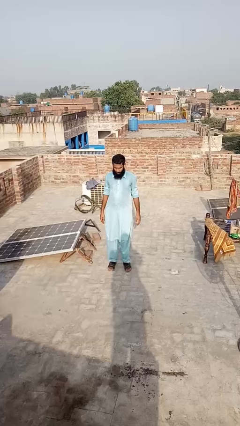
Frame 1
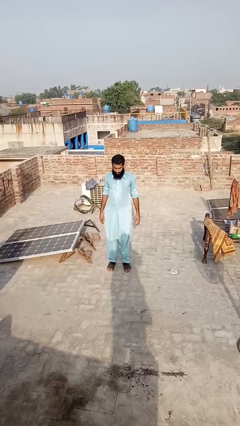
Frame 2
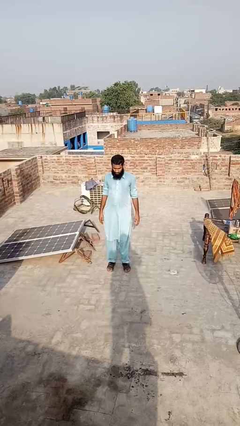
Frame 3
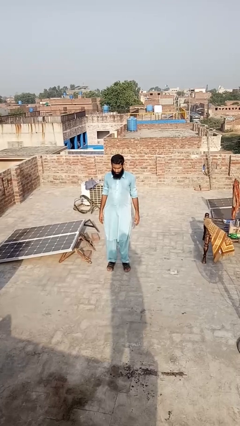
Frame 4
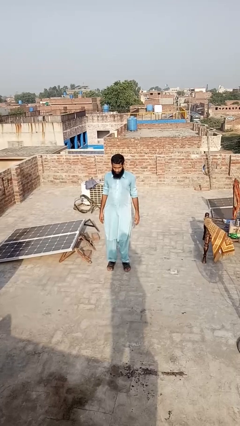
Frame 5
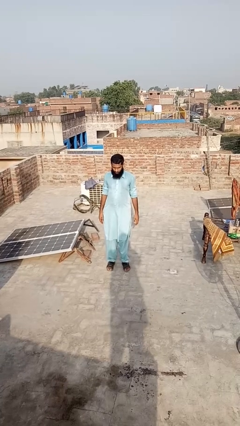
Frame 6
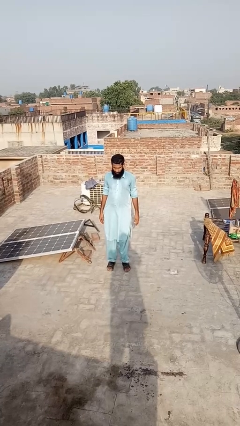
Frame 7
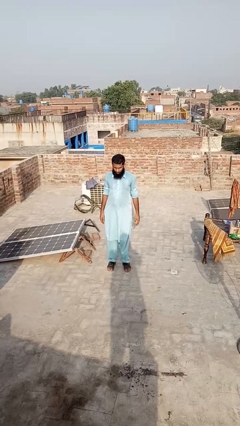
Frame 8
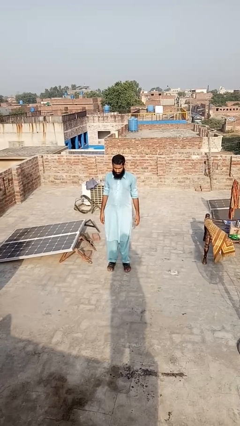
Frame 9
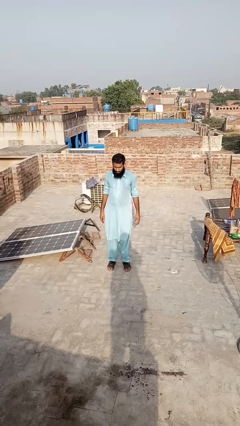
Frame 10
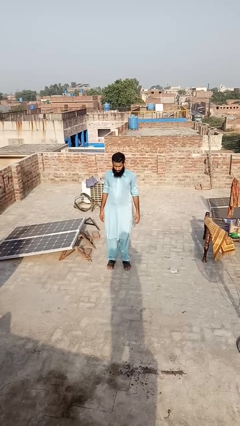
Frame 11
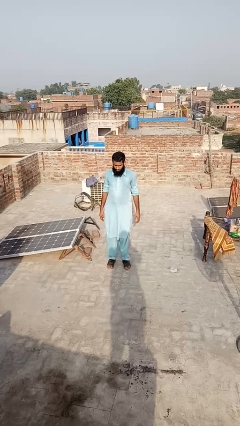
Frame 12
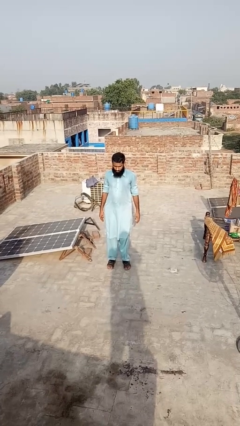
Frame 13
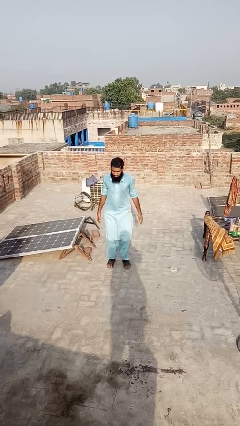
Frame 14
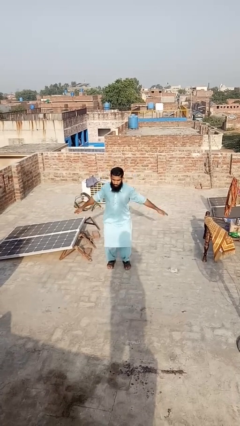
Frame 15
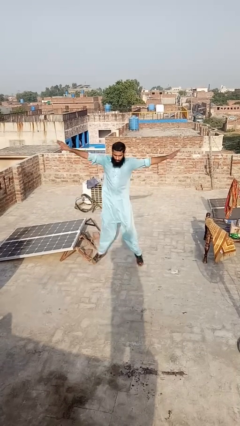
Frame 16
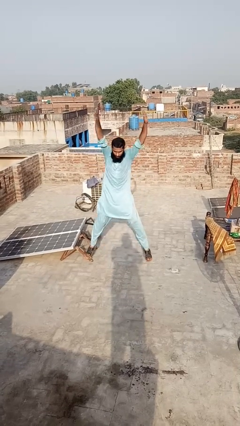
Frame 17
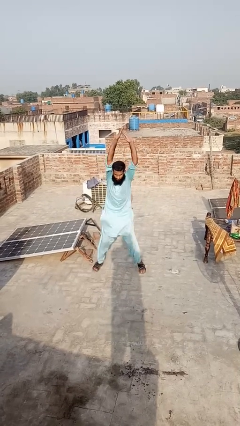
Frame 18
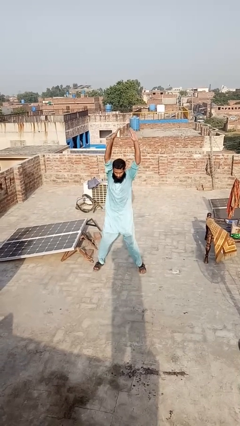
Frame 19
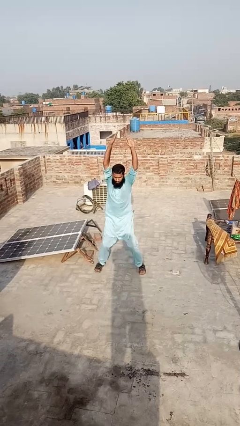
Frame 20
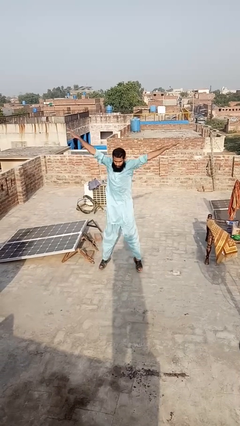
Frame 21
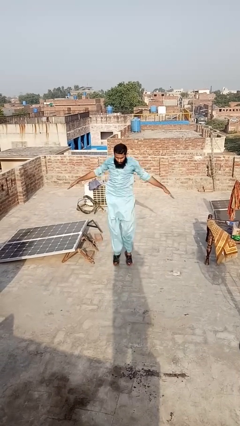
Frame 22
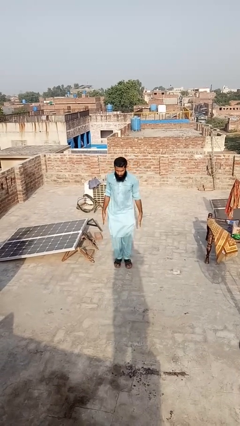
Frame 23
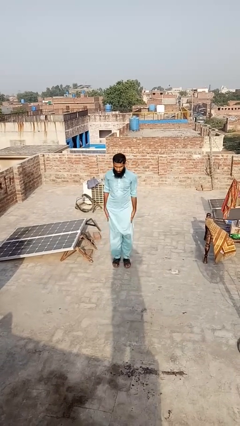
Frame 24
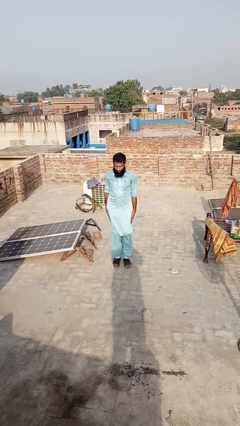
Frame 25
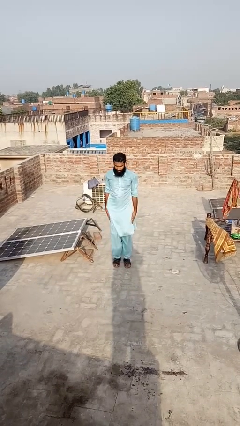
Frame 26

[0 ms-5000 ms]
person exercises with jumping jacks

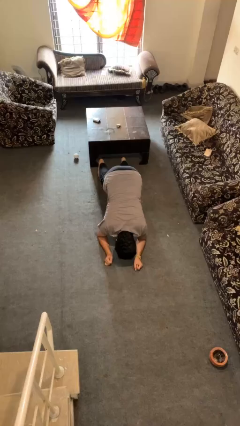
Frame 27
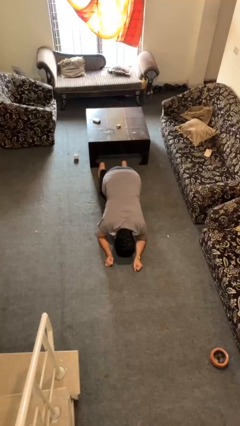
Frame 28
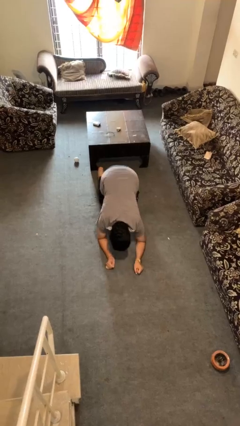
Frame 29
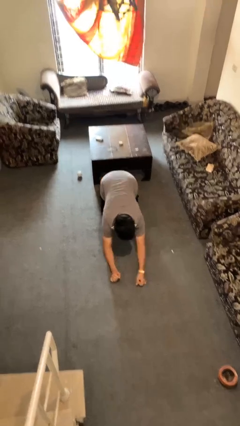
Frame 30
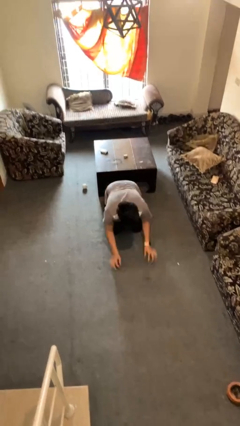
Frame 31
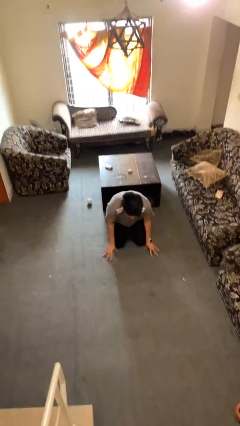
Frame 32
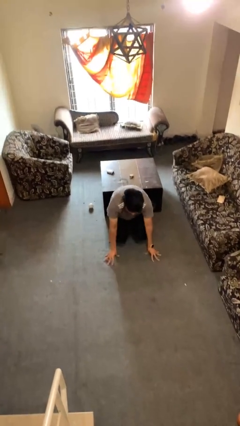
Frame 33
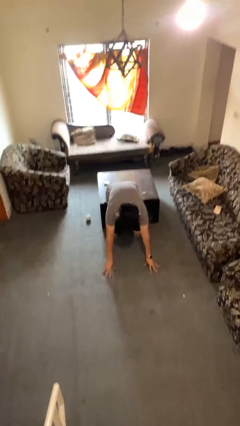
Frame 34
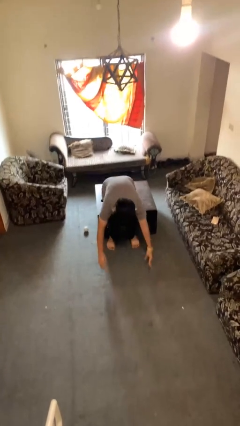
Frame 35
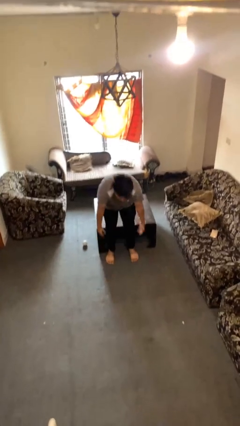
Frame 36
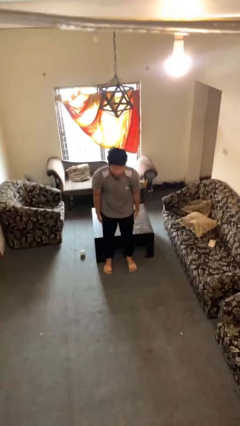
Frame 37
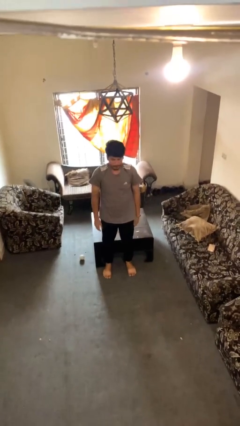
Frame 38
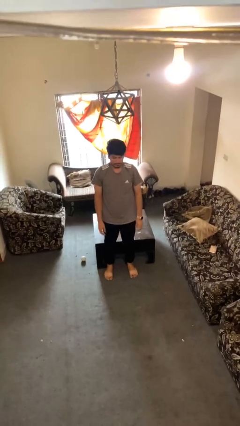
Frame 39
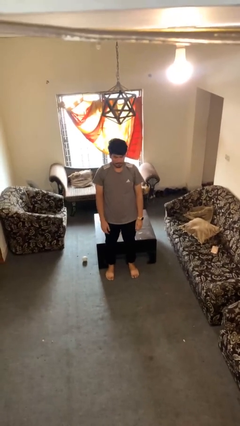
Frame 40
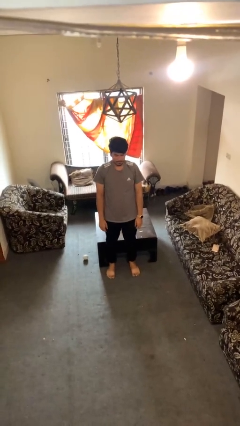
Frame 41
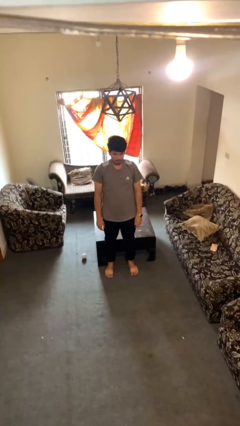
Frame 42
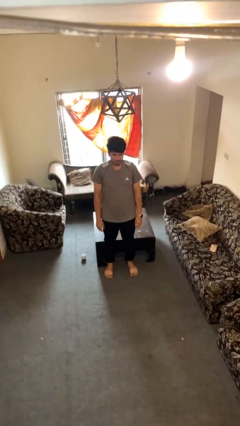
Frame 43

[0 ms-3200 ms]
person stands up from floor

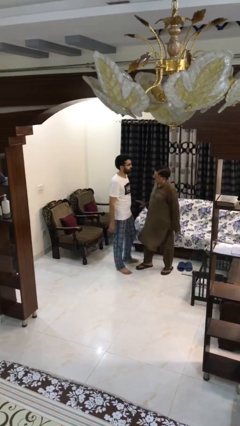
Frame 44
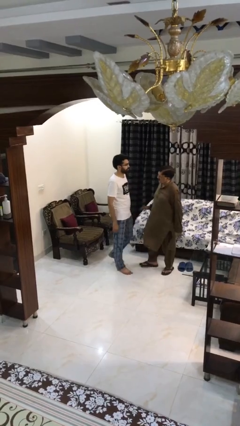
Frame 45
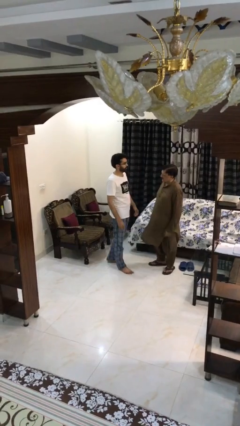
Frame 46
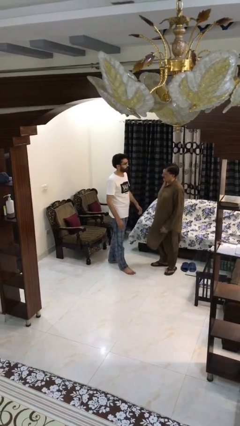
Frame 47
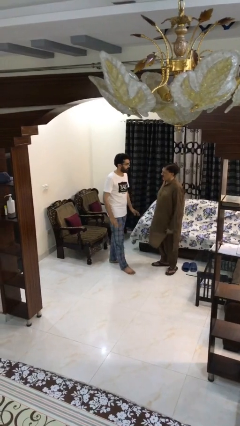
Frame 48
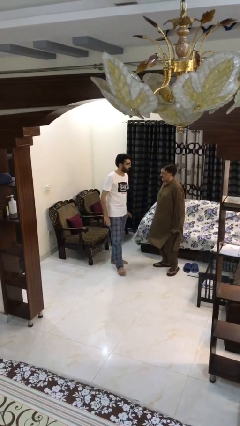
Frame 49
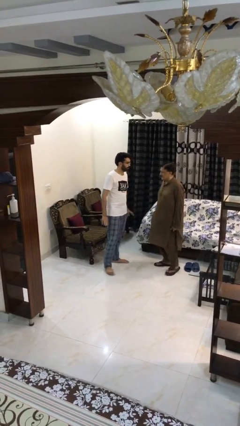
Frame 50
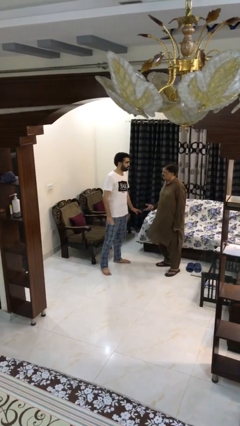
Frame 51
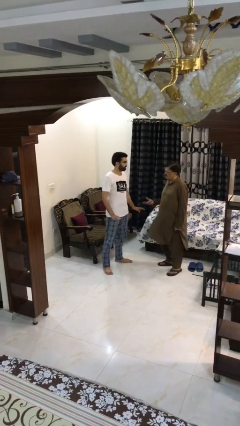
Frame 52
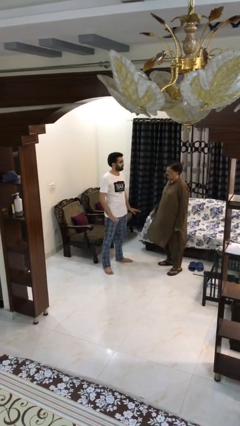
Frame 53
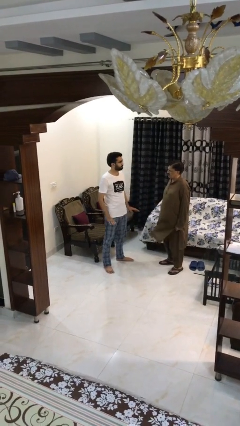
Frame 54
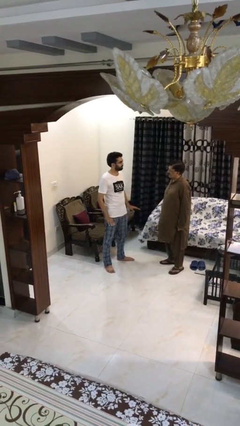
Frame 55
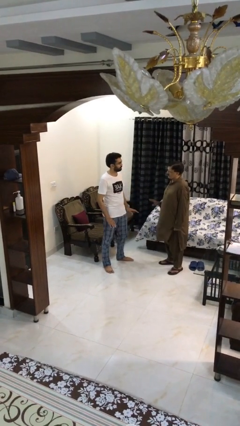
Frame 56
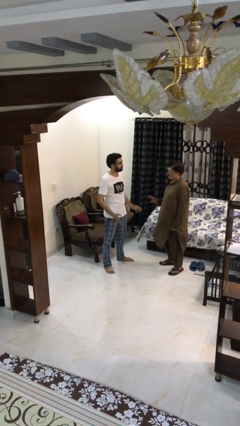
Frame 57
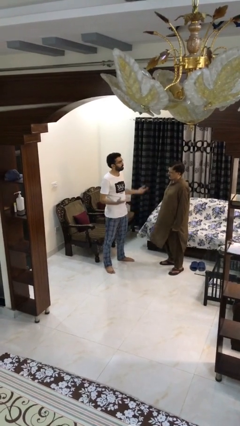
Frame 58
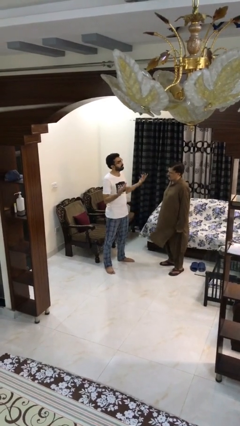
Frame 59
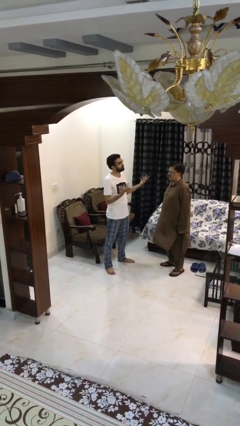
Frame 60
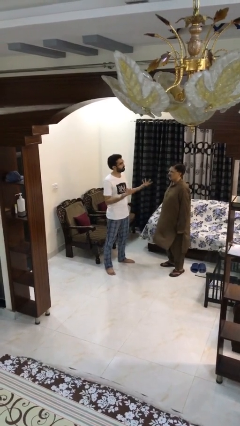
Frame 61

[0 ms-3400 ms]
person talks to person

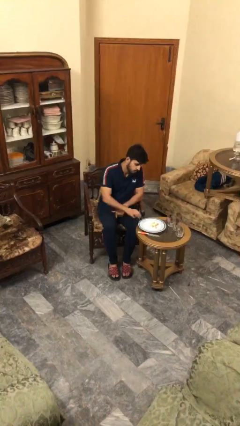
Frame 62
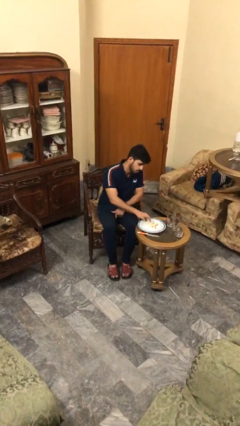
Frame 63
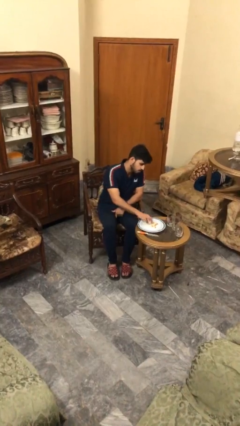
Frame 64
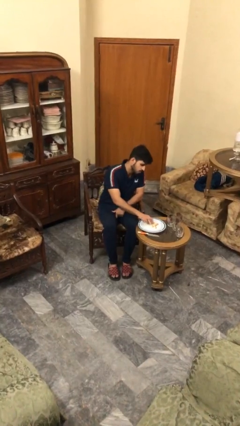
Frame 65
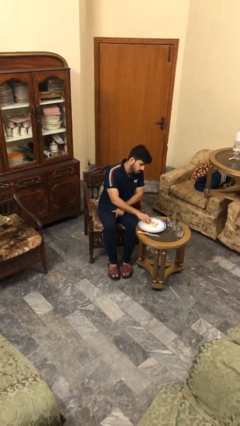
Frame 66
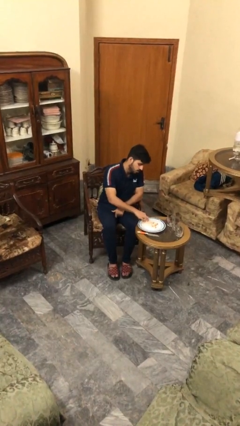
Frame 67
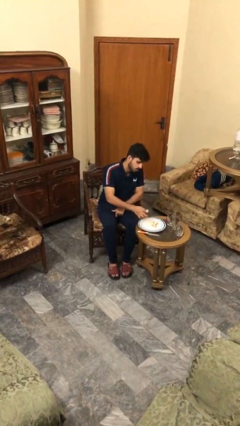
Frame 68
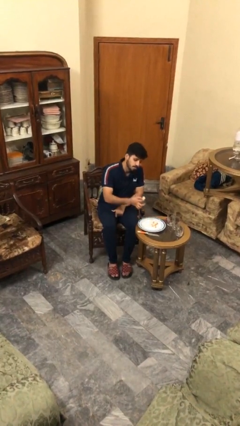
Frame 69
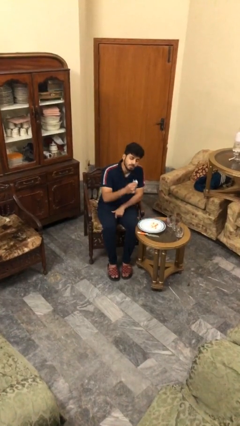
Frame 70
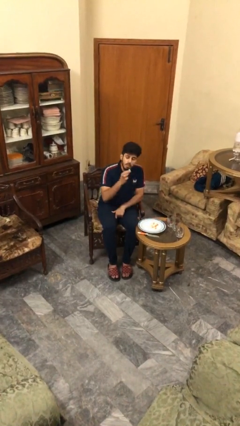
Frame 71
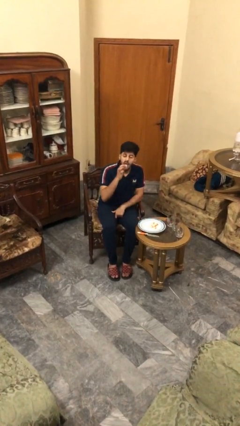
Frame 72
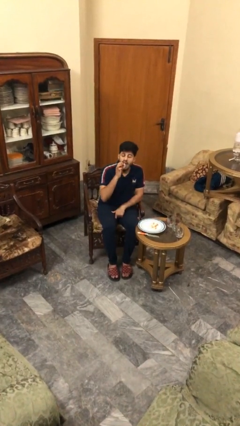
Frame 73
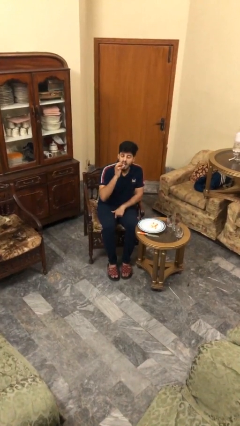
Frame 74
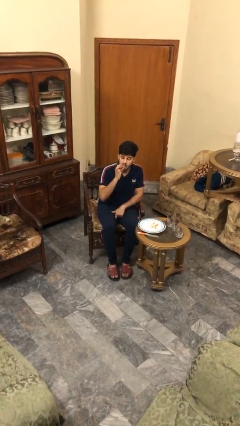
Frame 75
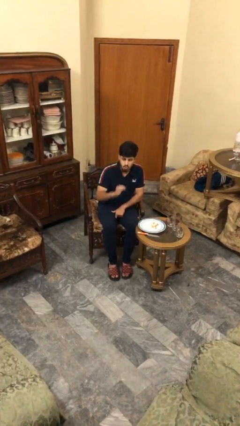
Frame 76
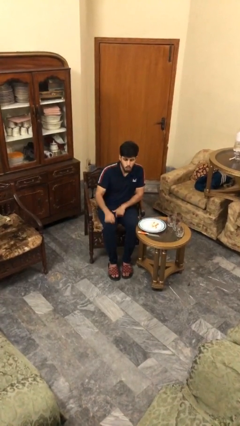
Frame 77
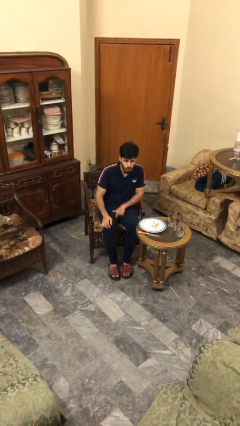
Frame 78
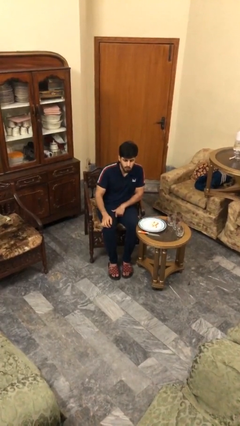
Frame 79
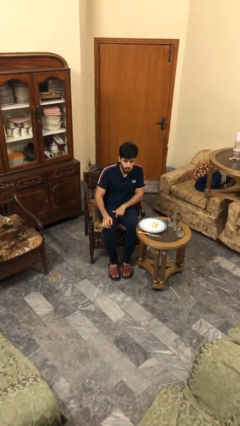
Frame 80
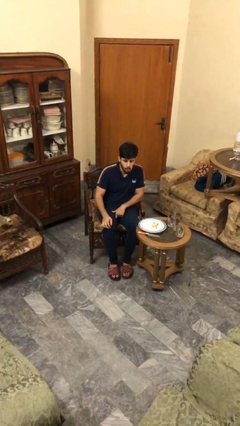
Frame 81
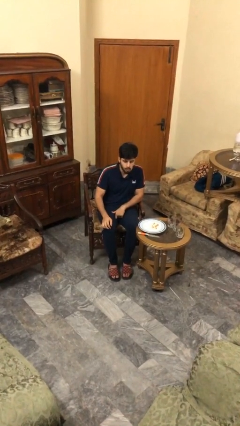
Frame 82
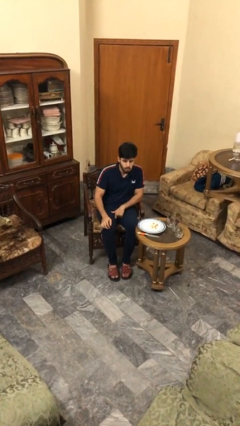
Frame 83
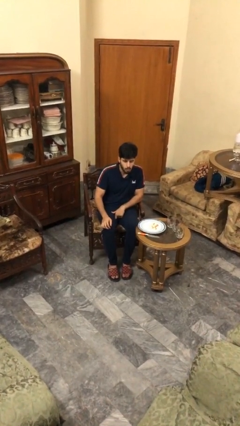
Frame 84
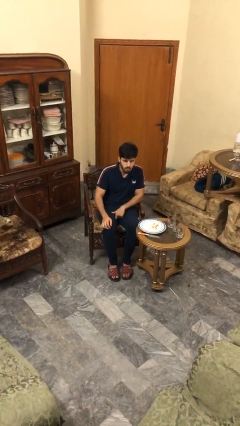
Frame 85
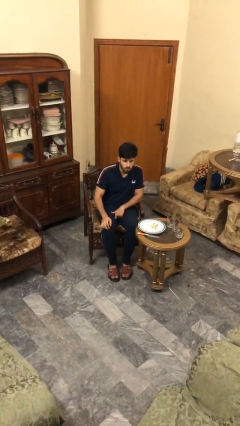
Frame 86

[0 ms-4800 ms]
person eats with hands

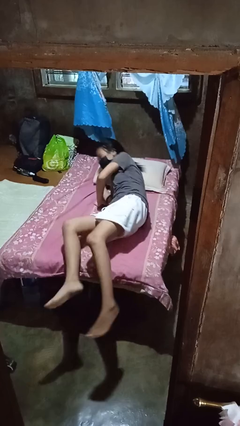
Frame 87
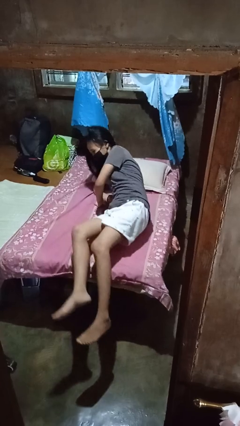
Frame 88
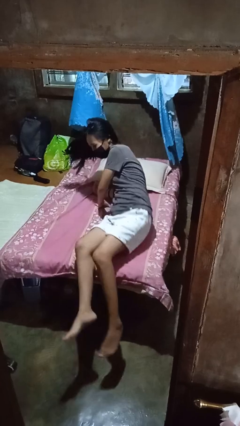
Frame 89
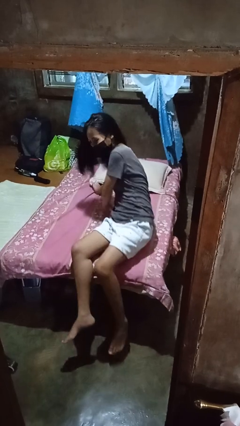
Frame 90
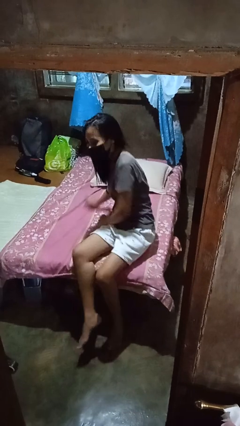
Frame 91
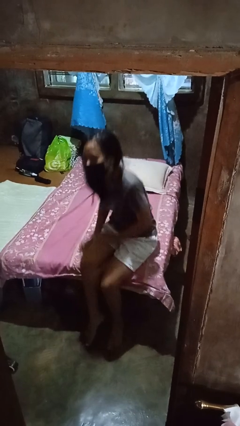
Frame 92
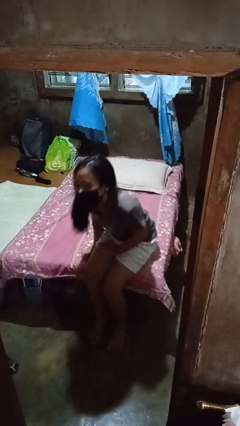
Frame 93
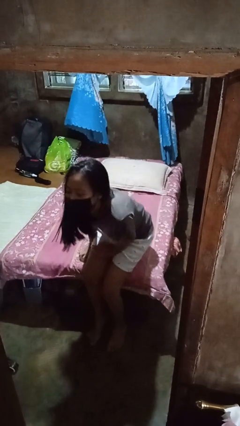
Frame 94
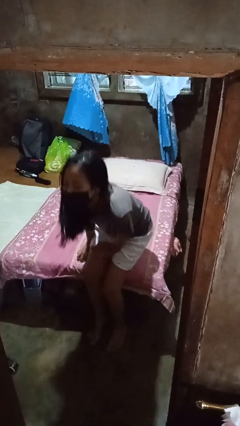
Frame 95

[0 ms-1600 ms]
person stands up
